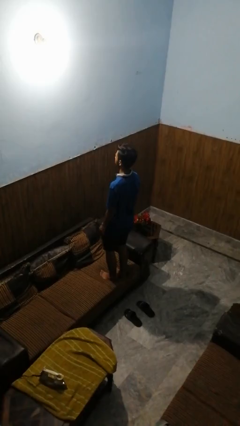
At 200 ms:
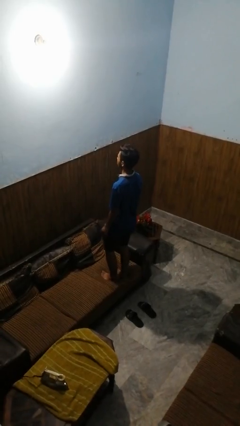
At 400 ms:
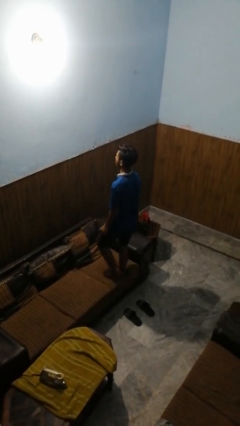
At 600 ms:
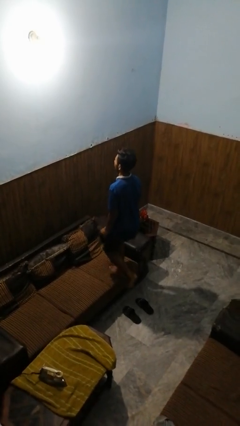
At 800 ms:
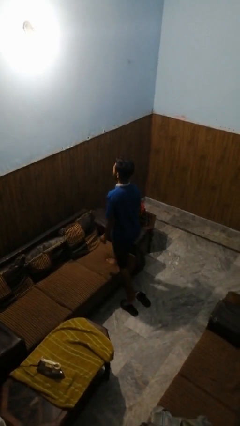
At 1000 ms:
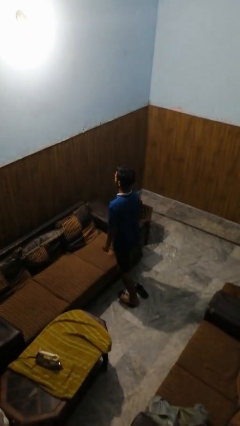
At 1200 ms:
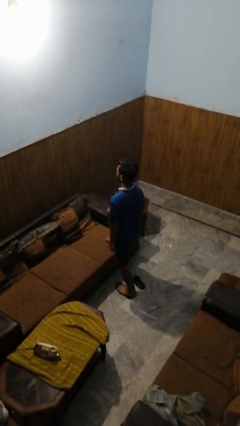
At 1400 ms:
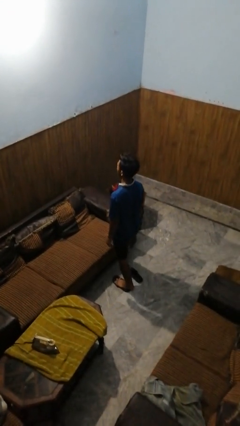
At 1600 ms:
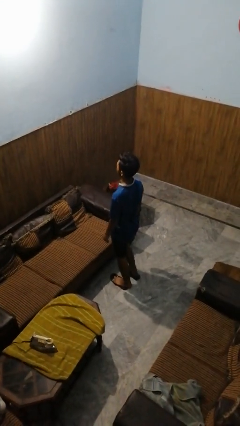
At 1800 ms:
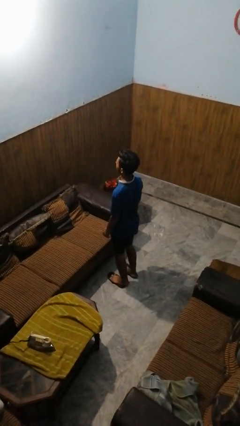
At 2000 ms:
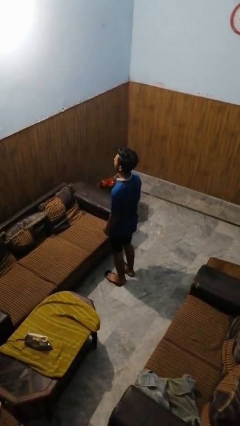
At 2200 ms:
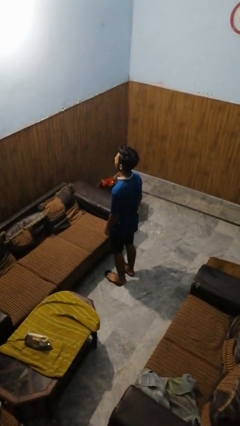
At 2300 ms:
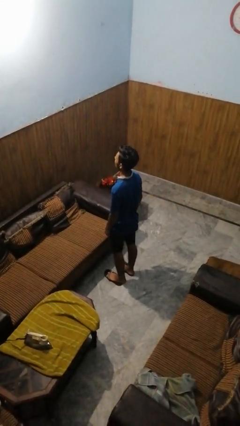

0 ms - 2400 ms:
person climbs off couch

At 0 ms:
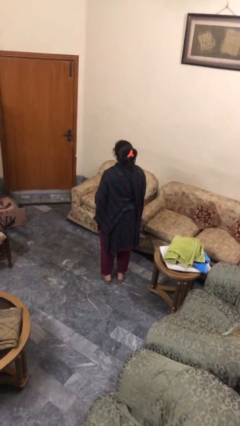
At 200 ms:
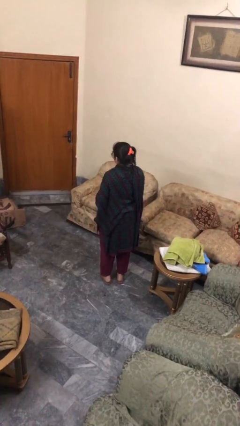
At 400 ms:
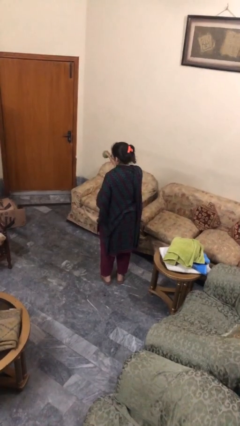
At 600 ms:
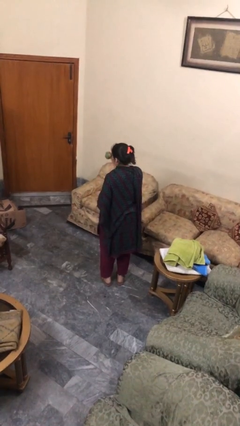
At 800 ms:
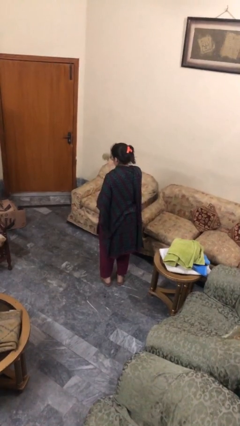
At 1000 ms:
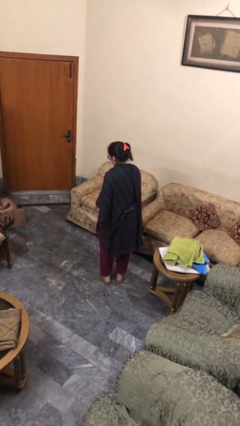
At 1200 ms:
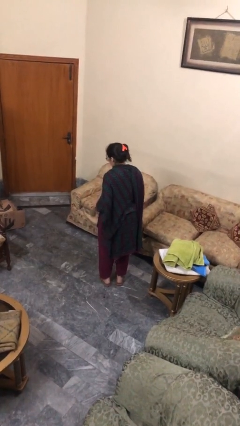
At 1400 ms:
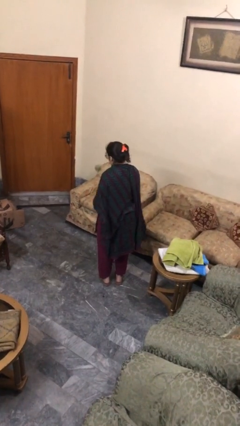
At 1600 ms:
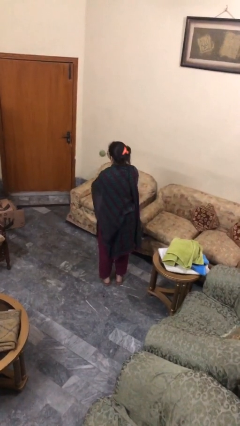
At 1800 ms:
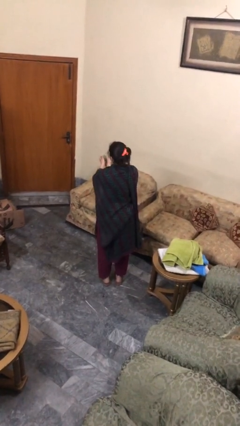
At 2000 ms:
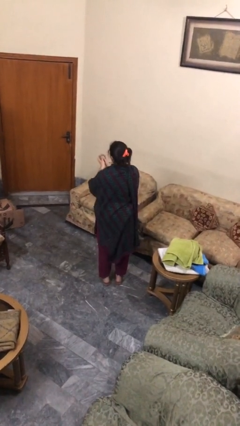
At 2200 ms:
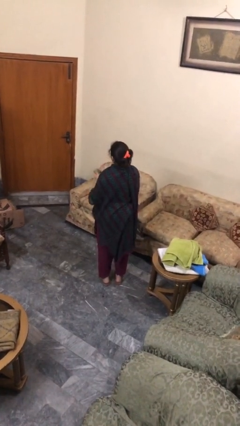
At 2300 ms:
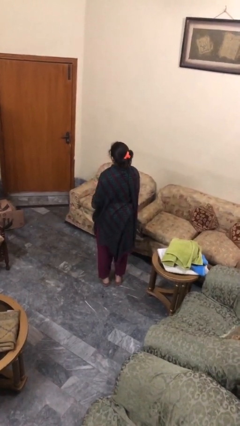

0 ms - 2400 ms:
person bounces ball on floor

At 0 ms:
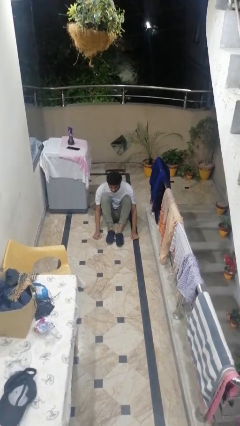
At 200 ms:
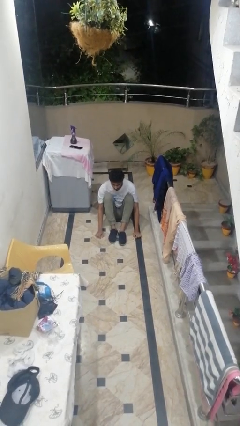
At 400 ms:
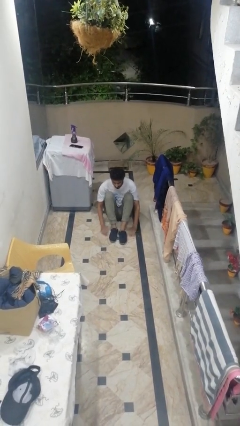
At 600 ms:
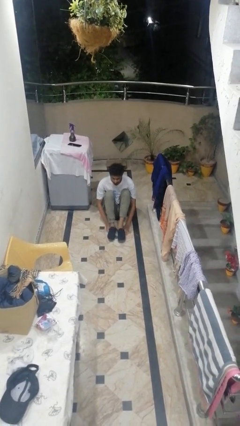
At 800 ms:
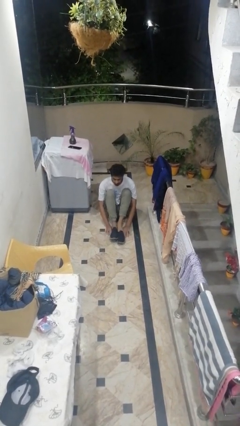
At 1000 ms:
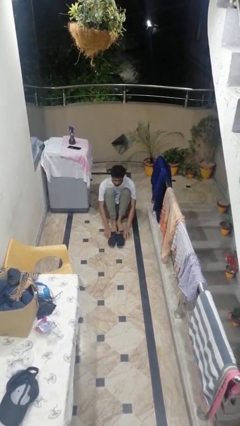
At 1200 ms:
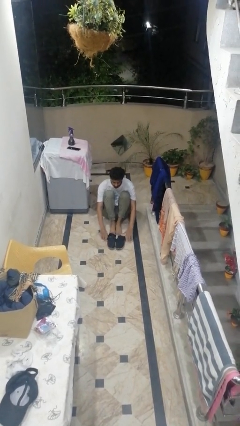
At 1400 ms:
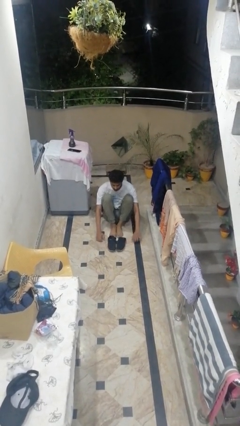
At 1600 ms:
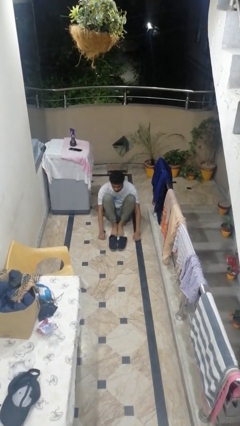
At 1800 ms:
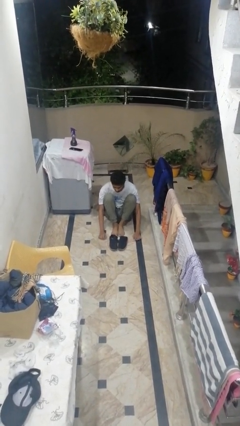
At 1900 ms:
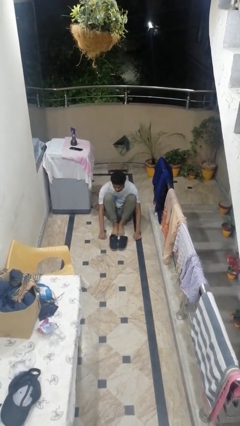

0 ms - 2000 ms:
person takes off shoes

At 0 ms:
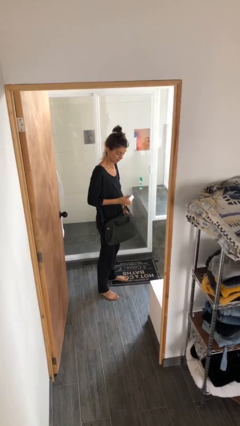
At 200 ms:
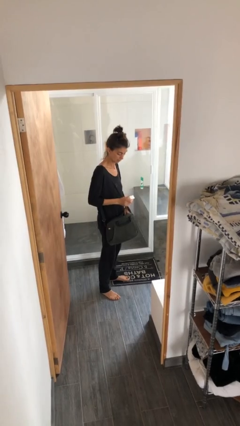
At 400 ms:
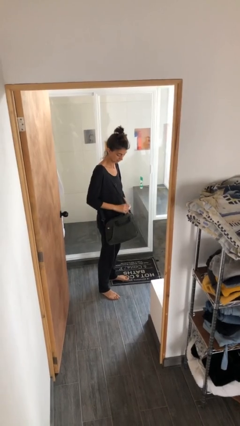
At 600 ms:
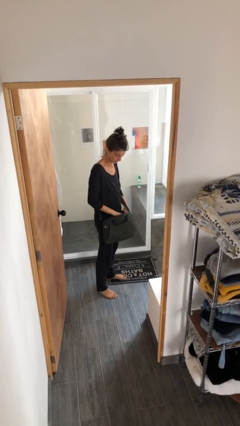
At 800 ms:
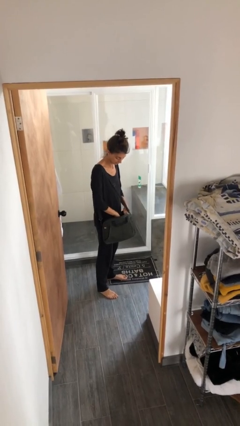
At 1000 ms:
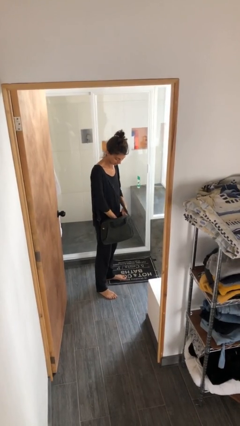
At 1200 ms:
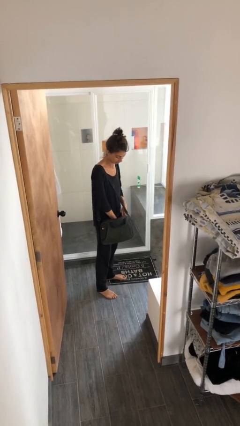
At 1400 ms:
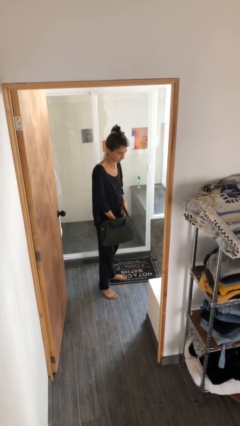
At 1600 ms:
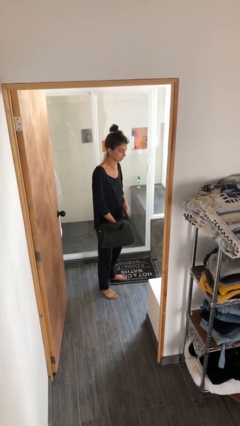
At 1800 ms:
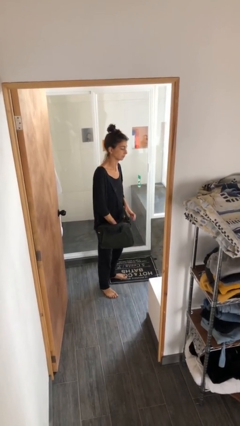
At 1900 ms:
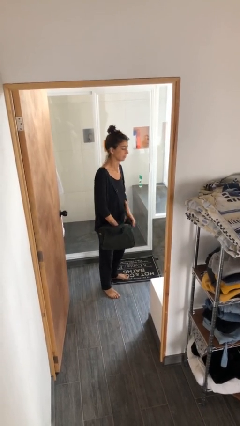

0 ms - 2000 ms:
person puts object into purse

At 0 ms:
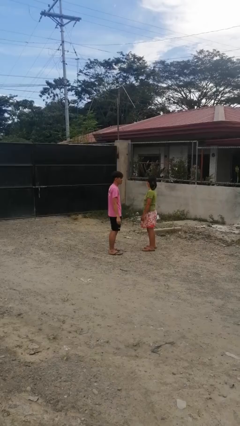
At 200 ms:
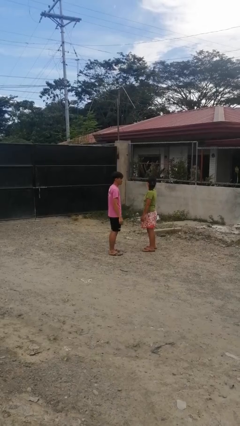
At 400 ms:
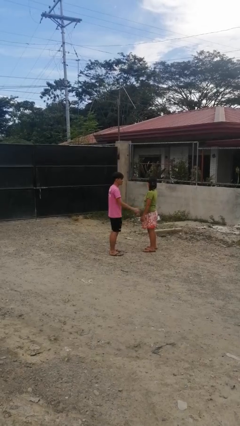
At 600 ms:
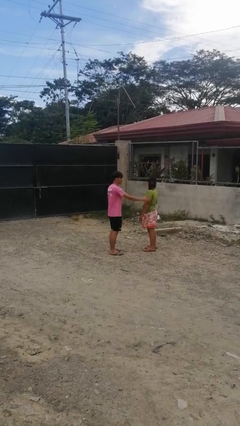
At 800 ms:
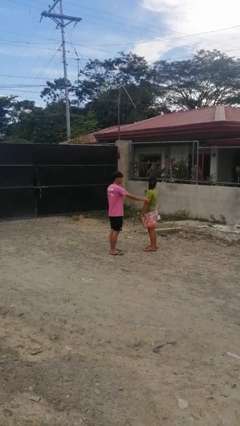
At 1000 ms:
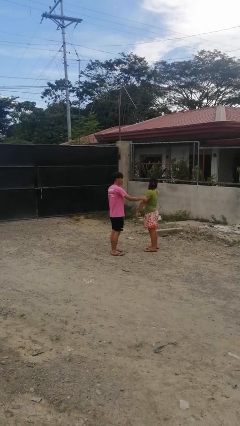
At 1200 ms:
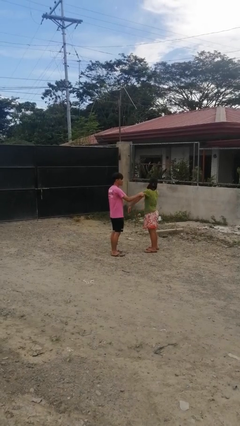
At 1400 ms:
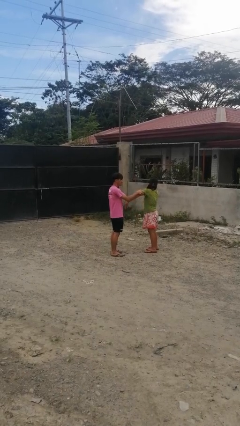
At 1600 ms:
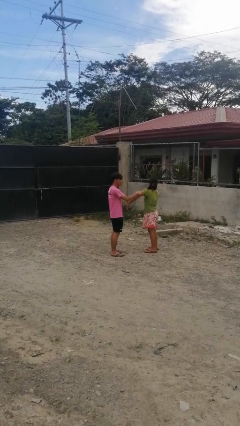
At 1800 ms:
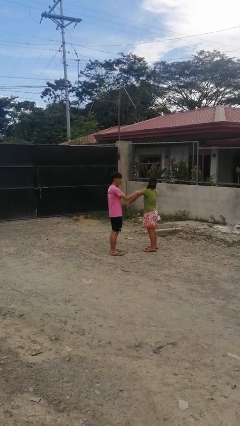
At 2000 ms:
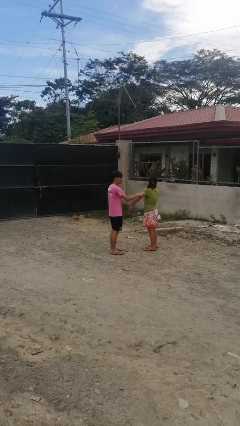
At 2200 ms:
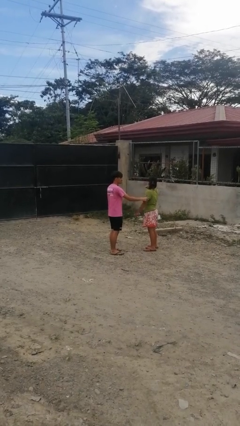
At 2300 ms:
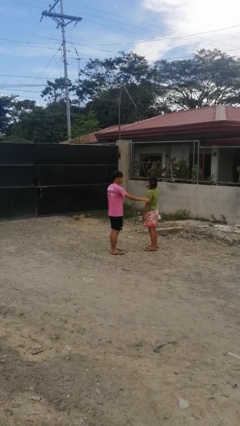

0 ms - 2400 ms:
person grabs person by bicep

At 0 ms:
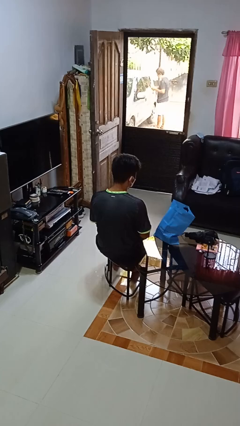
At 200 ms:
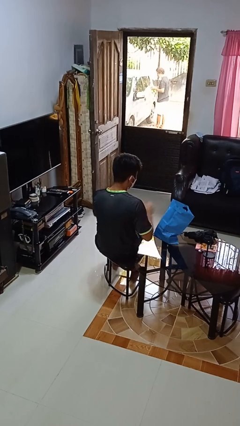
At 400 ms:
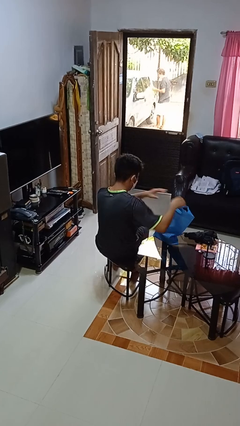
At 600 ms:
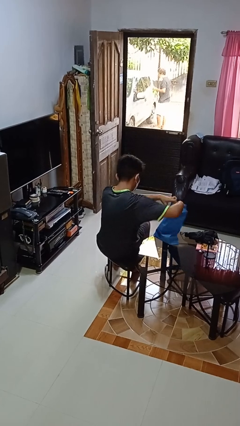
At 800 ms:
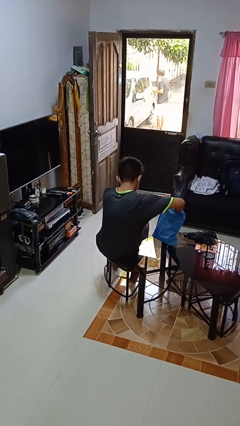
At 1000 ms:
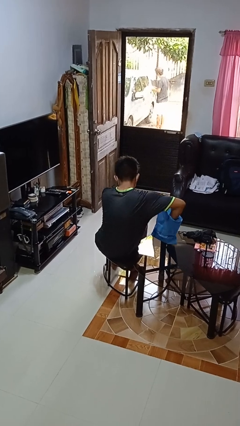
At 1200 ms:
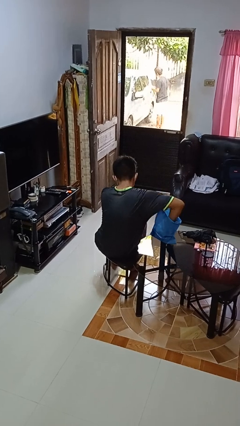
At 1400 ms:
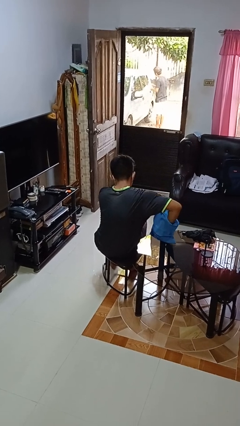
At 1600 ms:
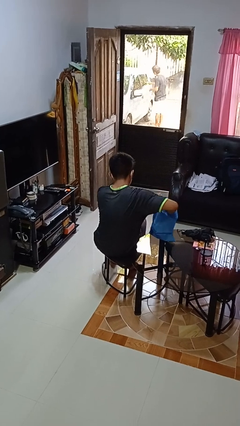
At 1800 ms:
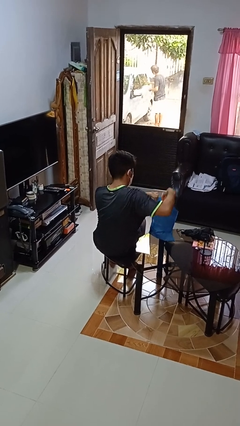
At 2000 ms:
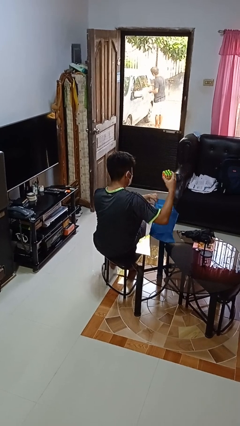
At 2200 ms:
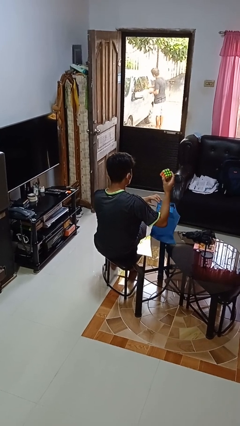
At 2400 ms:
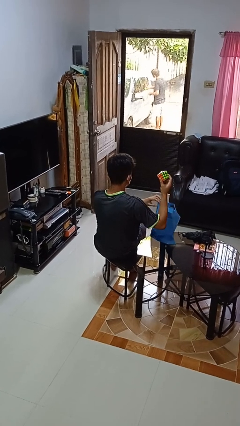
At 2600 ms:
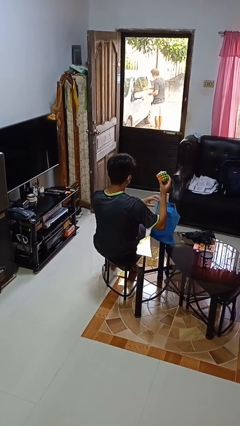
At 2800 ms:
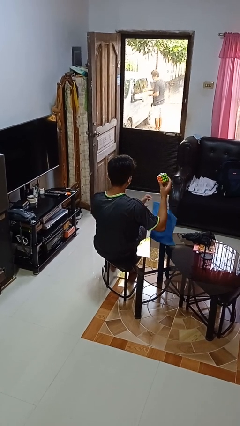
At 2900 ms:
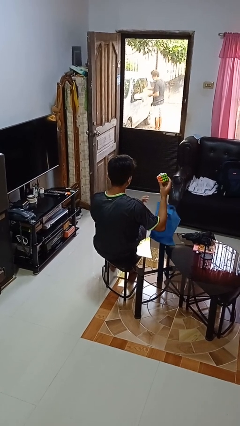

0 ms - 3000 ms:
person takes object from bag

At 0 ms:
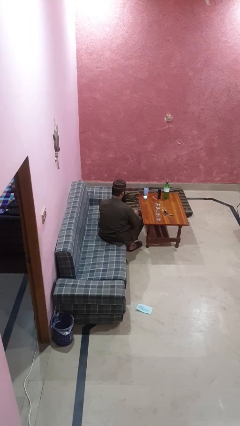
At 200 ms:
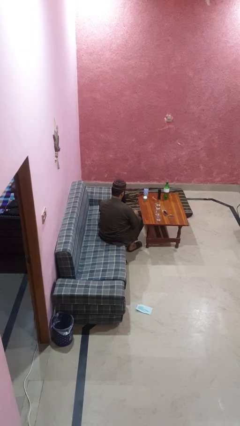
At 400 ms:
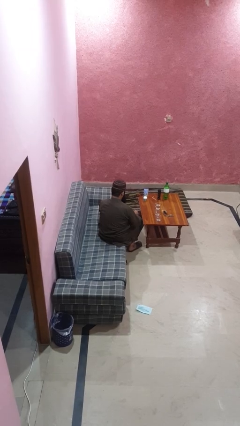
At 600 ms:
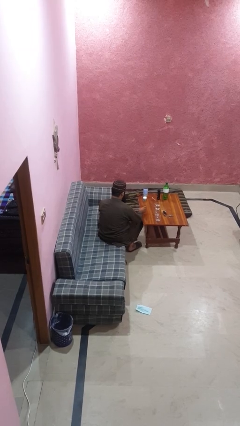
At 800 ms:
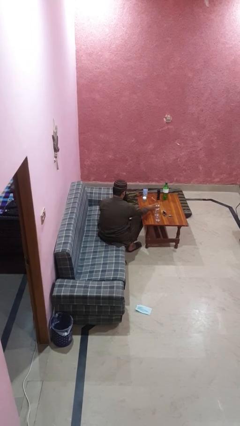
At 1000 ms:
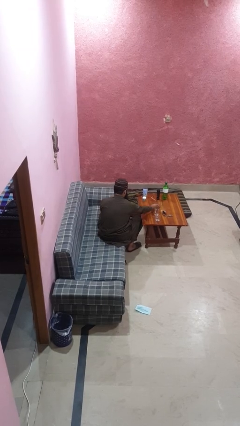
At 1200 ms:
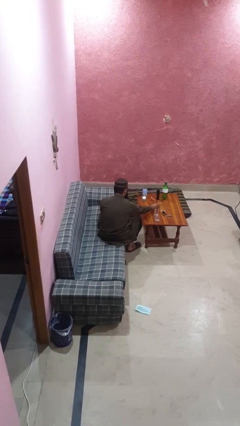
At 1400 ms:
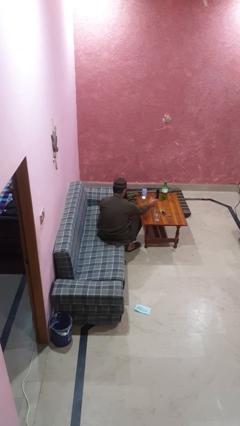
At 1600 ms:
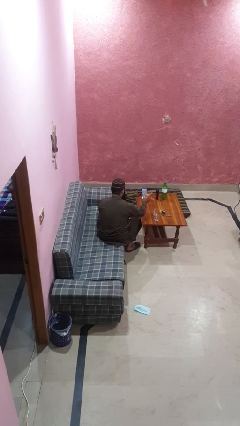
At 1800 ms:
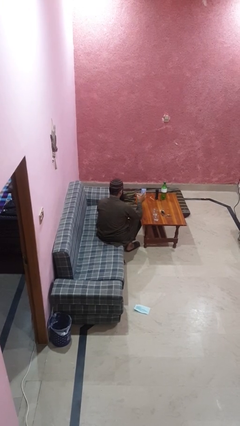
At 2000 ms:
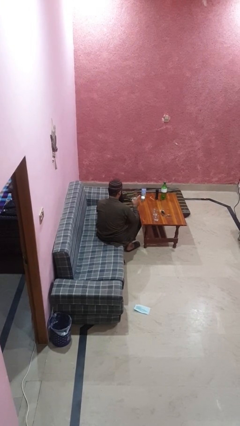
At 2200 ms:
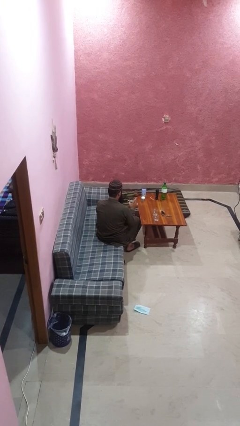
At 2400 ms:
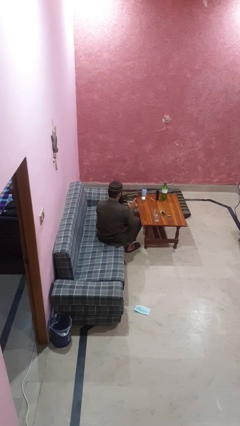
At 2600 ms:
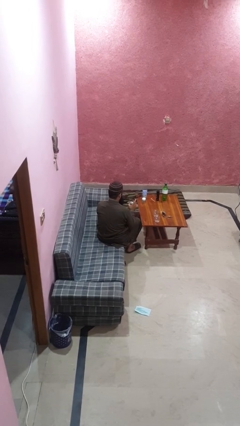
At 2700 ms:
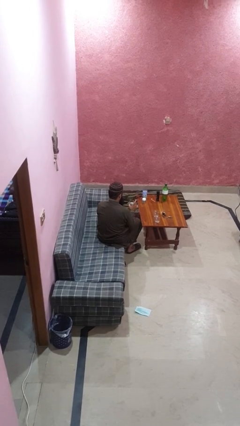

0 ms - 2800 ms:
person picks up object from table
